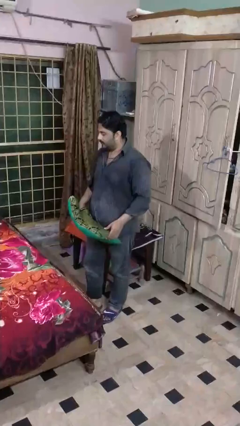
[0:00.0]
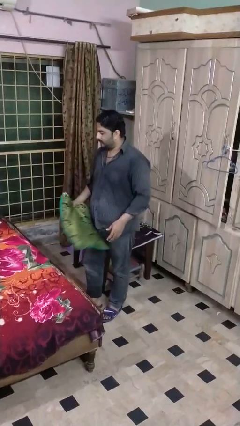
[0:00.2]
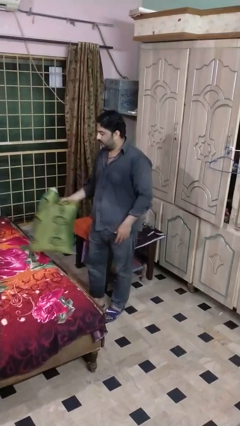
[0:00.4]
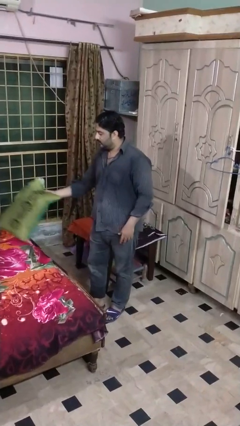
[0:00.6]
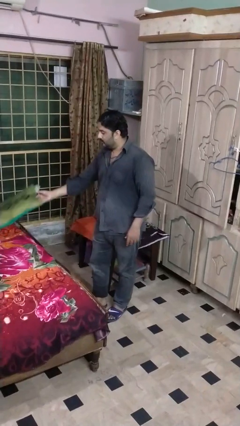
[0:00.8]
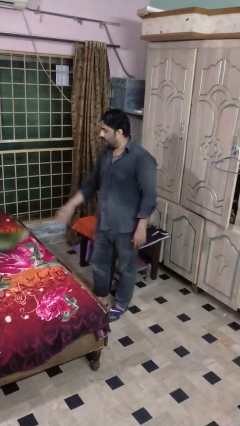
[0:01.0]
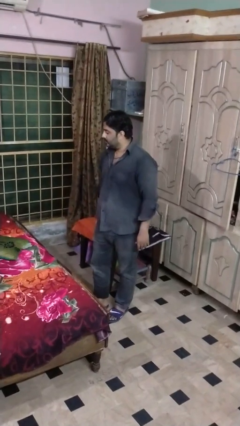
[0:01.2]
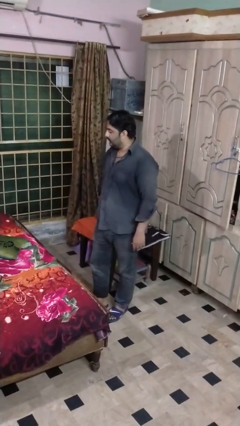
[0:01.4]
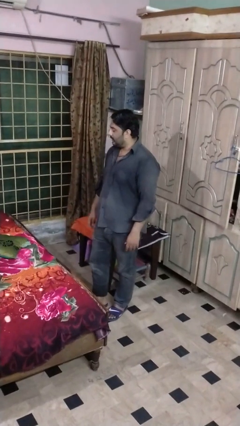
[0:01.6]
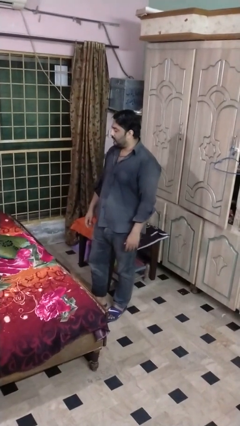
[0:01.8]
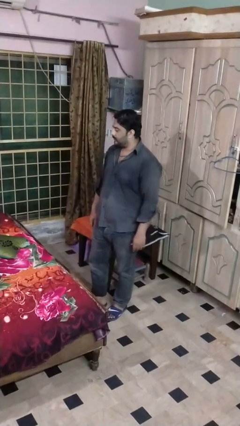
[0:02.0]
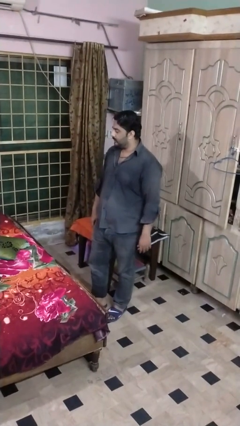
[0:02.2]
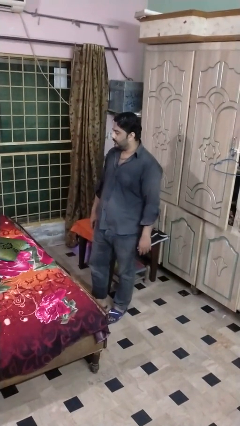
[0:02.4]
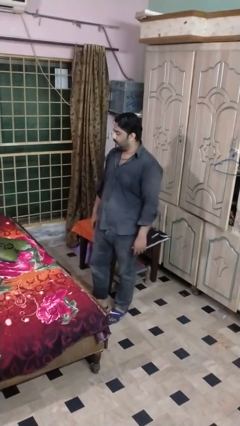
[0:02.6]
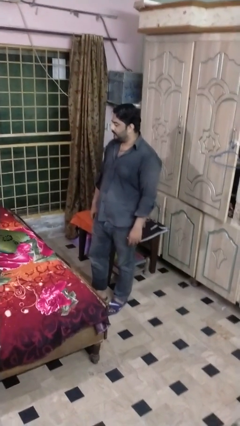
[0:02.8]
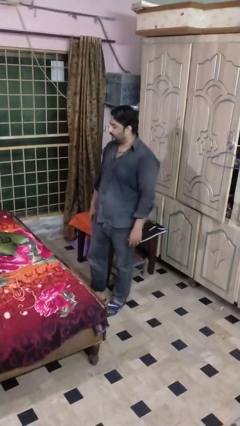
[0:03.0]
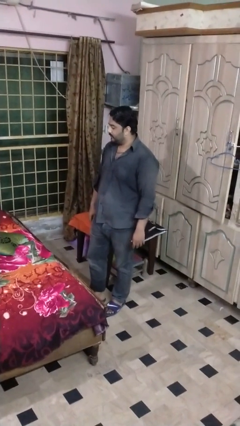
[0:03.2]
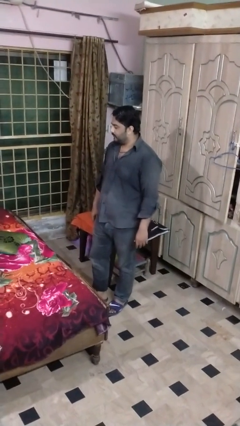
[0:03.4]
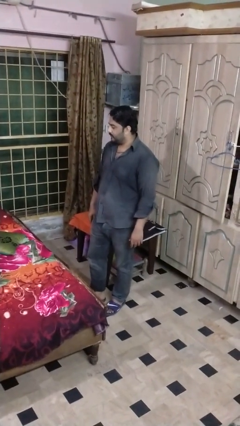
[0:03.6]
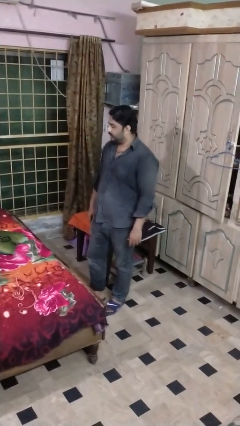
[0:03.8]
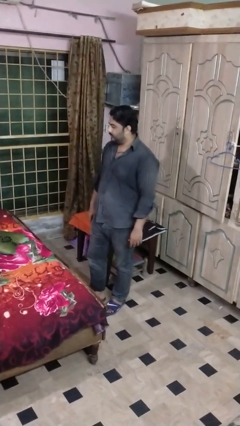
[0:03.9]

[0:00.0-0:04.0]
person puts down object on bed

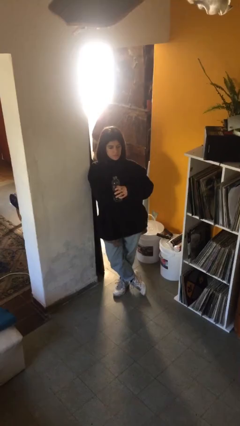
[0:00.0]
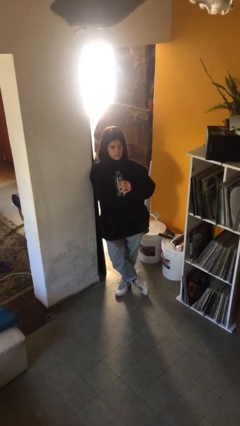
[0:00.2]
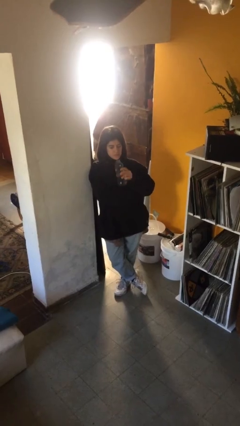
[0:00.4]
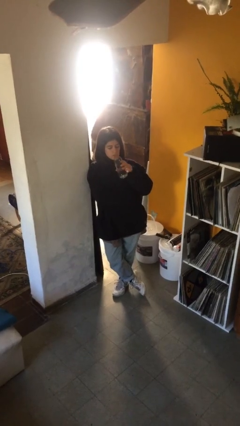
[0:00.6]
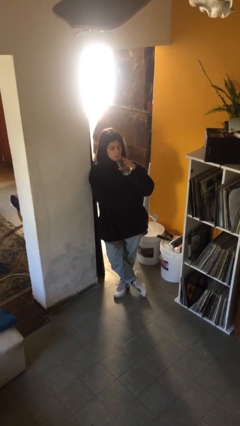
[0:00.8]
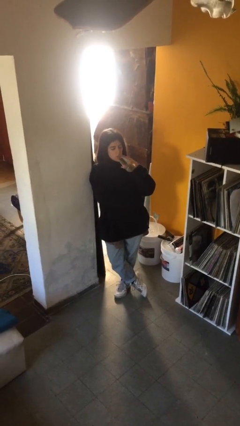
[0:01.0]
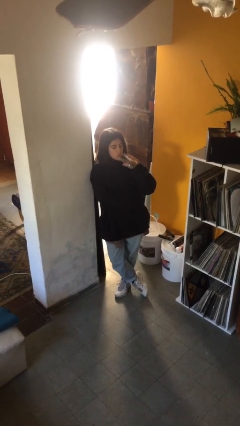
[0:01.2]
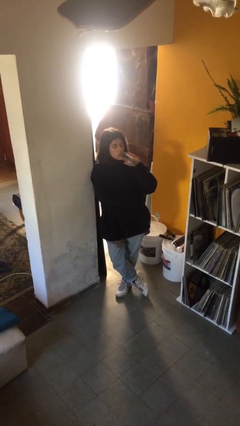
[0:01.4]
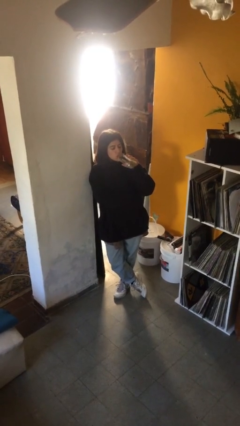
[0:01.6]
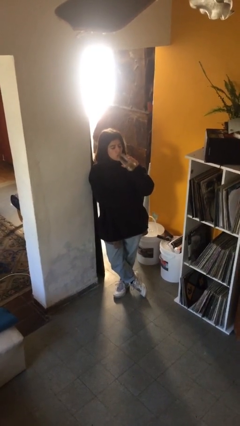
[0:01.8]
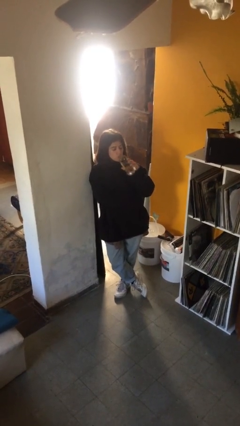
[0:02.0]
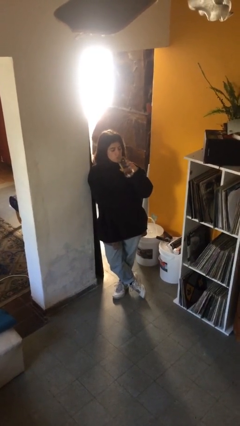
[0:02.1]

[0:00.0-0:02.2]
person drinks from bottle

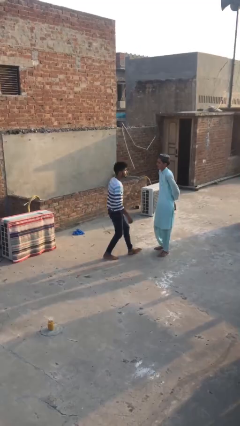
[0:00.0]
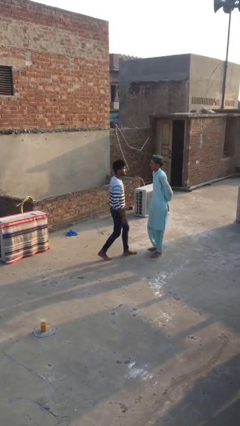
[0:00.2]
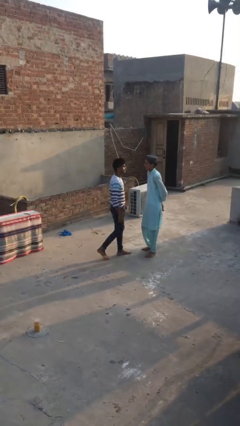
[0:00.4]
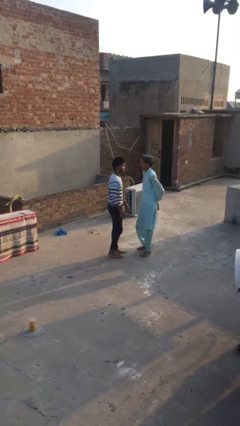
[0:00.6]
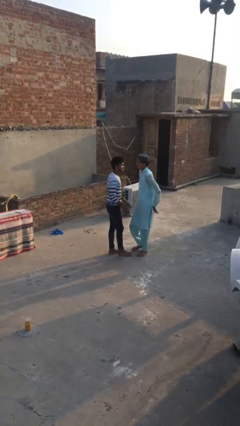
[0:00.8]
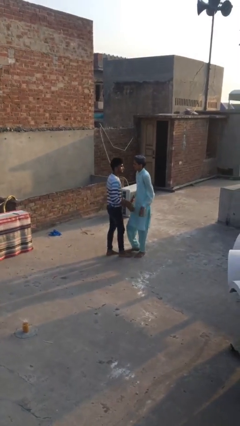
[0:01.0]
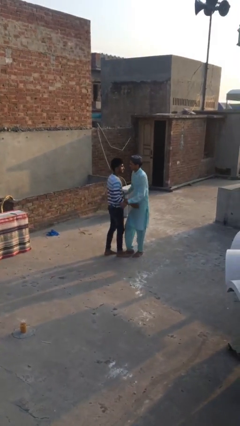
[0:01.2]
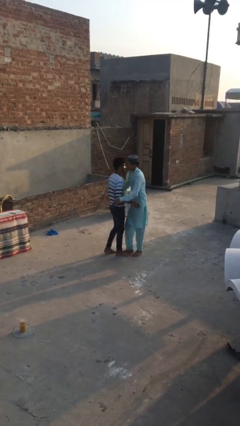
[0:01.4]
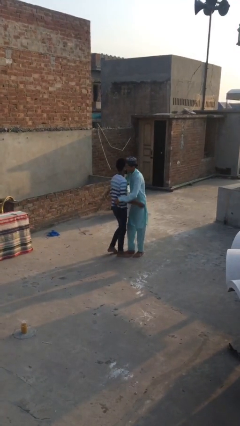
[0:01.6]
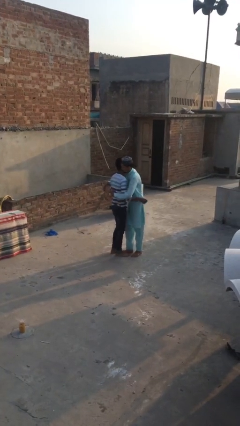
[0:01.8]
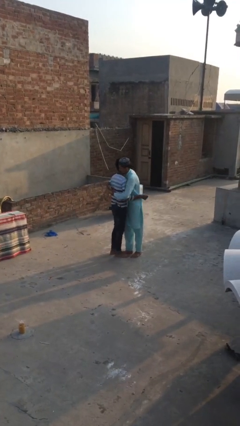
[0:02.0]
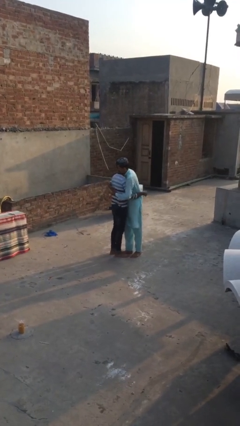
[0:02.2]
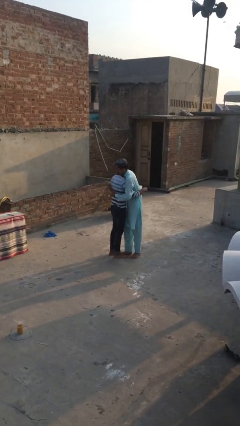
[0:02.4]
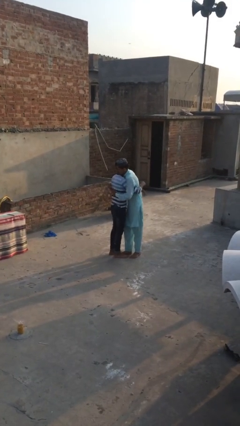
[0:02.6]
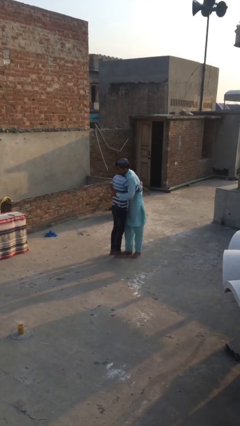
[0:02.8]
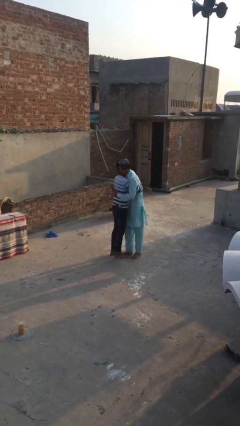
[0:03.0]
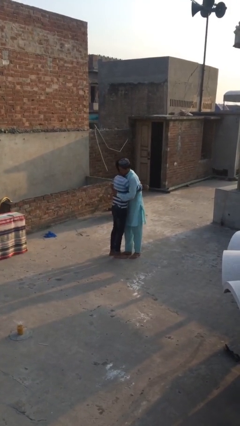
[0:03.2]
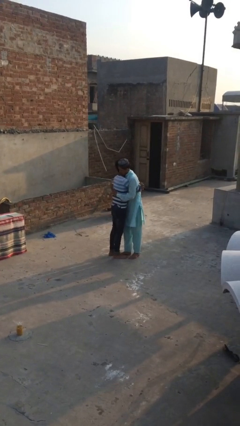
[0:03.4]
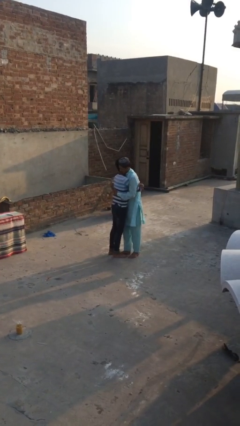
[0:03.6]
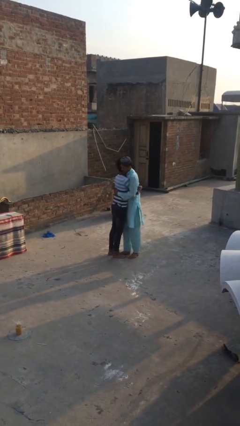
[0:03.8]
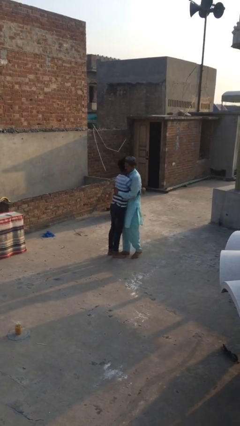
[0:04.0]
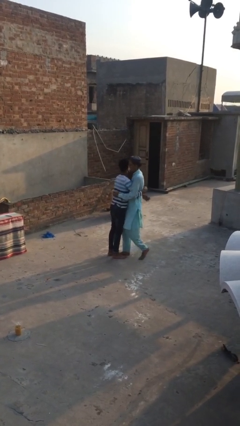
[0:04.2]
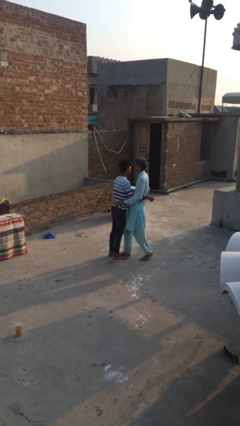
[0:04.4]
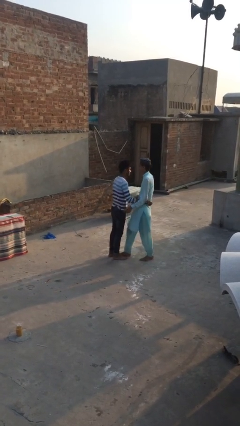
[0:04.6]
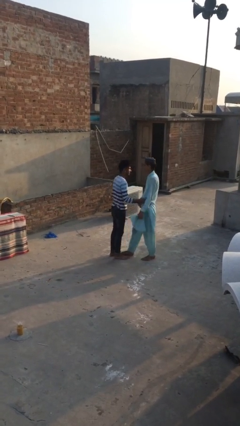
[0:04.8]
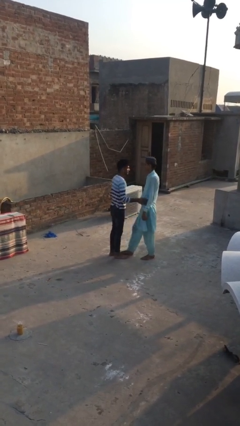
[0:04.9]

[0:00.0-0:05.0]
person embraces person

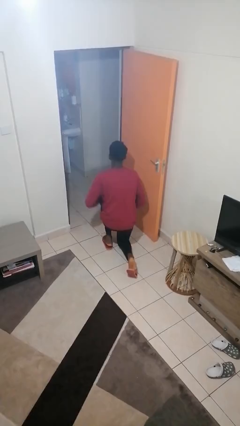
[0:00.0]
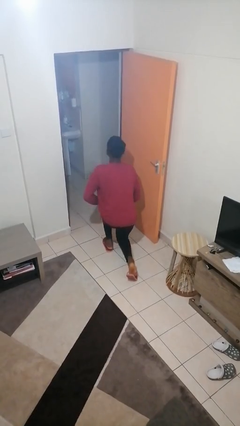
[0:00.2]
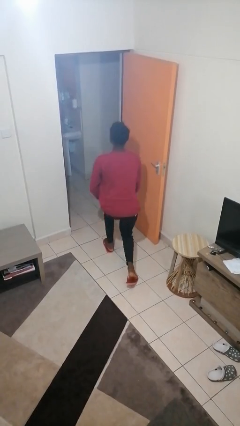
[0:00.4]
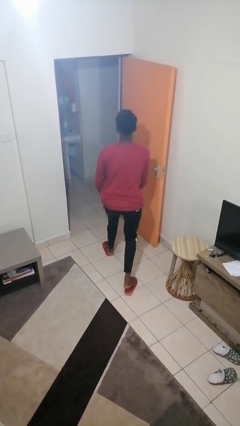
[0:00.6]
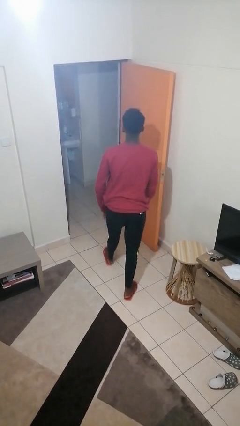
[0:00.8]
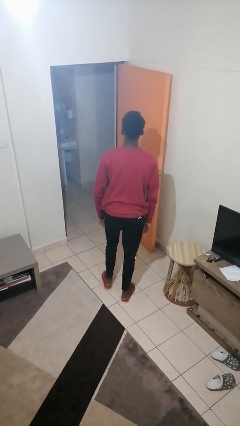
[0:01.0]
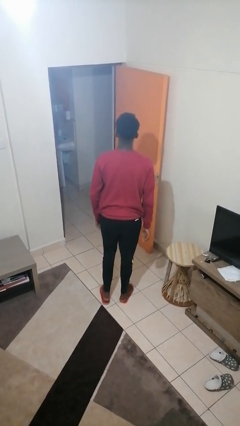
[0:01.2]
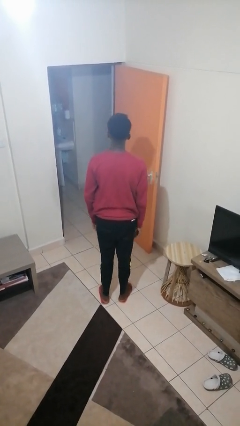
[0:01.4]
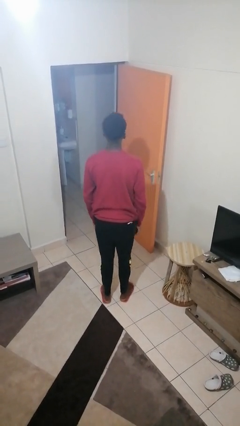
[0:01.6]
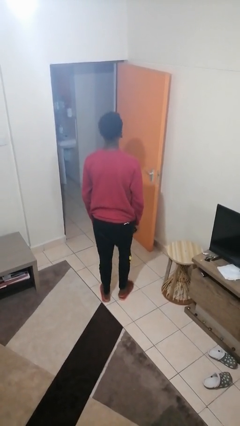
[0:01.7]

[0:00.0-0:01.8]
person stands up from floor

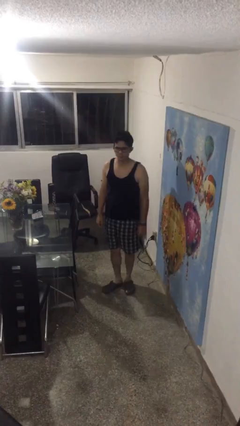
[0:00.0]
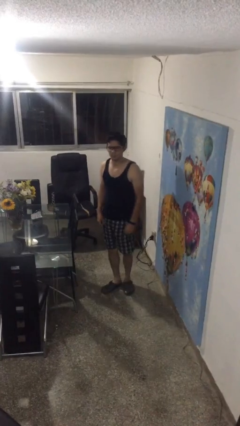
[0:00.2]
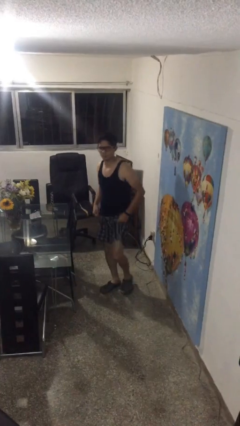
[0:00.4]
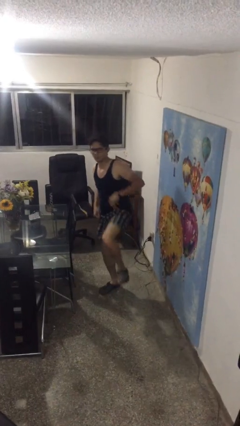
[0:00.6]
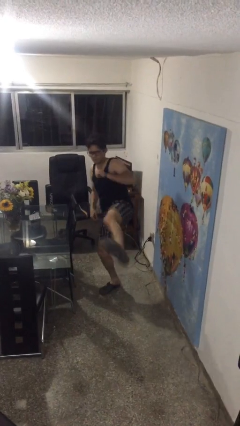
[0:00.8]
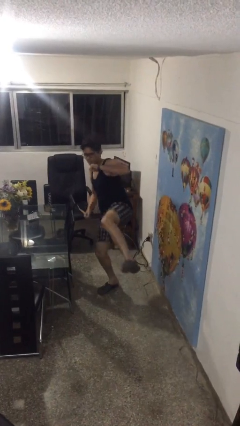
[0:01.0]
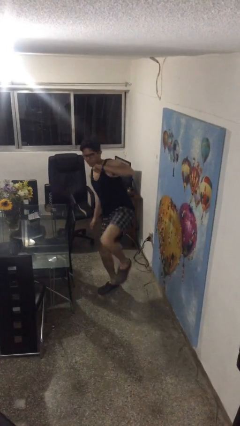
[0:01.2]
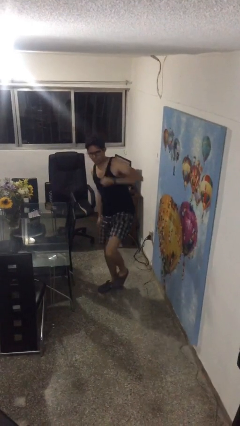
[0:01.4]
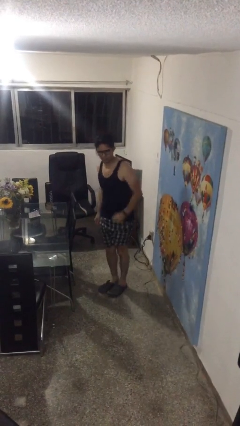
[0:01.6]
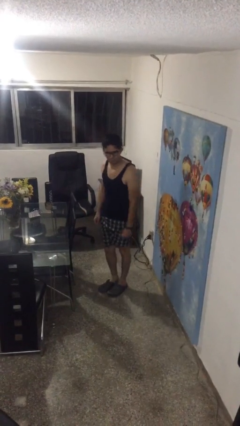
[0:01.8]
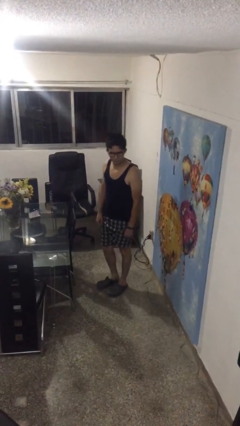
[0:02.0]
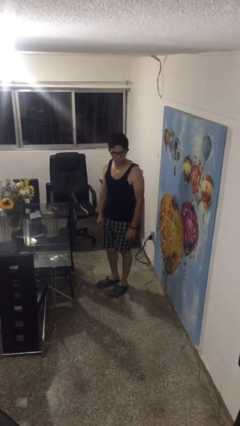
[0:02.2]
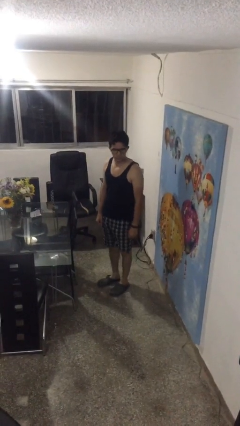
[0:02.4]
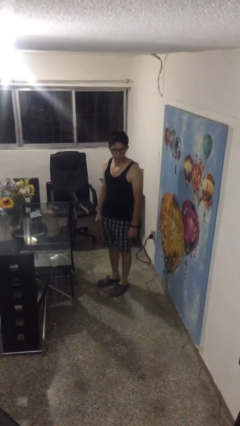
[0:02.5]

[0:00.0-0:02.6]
person karate kicks

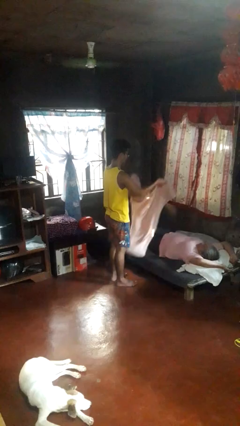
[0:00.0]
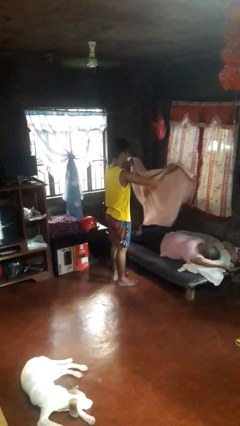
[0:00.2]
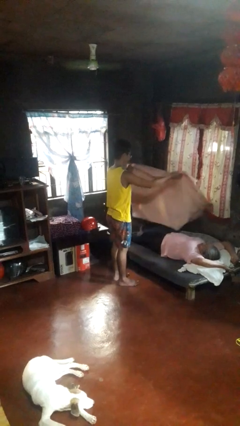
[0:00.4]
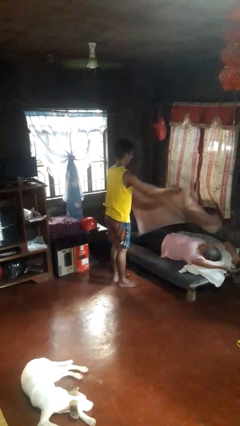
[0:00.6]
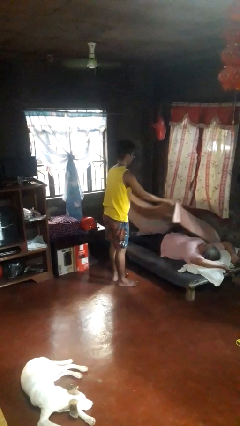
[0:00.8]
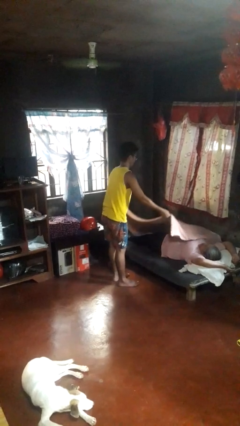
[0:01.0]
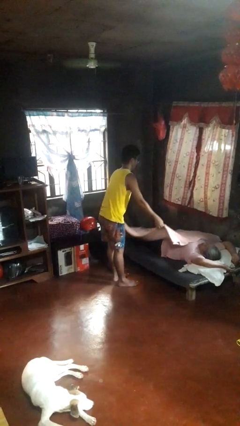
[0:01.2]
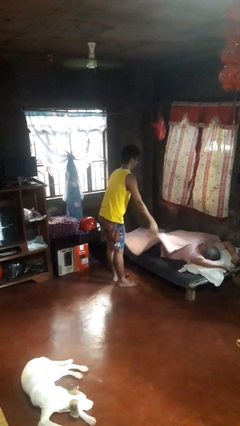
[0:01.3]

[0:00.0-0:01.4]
person covers friend with blanket

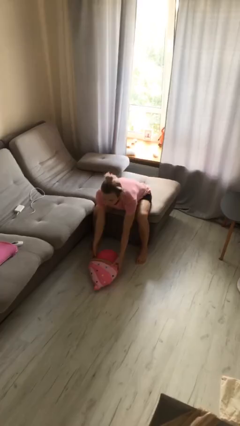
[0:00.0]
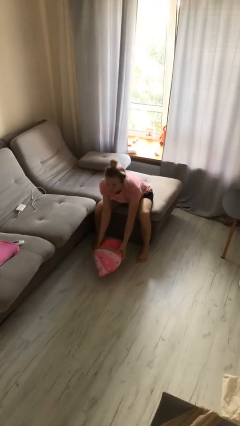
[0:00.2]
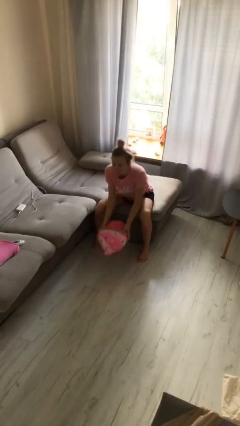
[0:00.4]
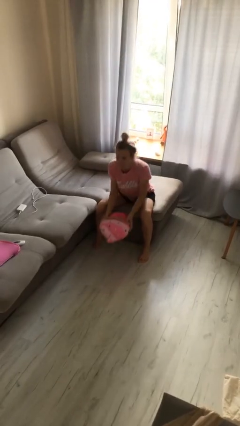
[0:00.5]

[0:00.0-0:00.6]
person picks up object from floor
